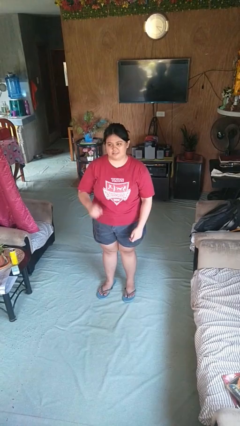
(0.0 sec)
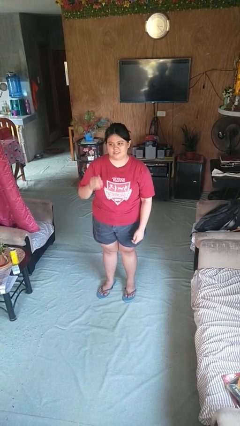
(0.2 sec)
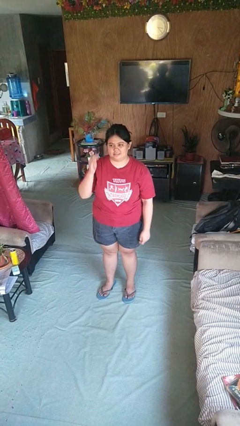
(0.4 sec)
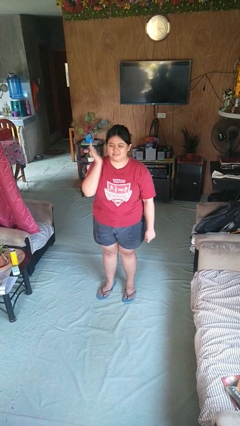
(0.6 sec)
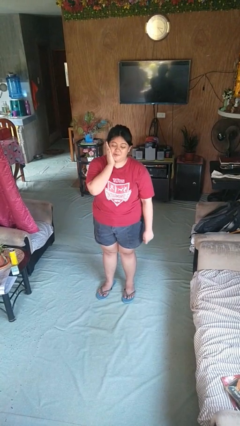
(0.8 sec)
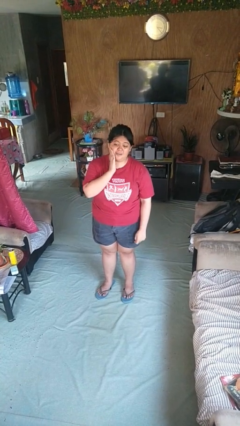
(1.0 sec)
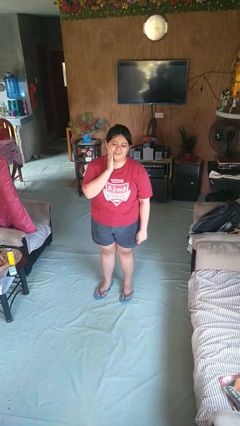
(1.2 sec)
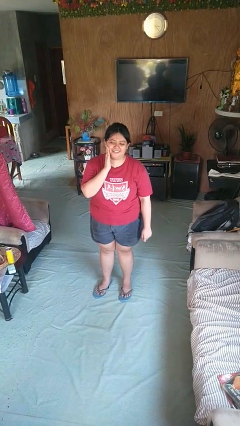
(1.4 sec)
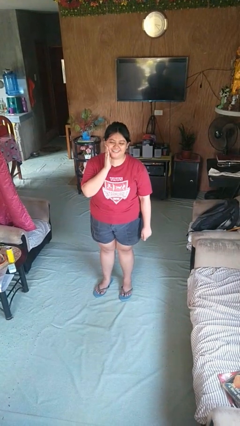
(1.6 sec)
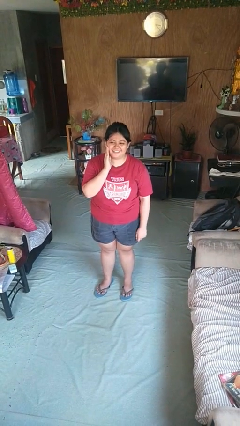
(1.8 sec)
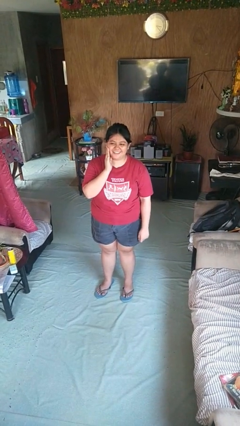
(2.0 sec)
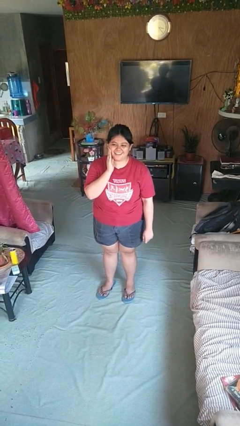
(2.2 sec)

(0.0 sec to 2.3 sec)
person swats bug

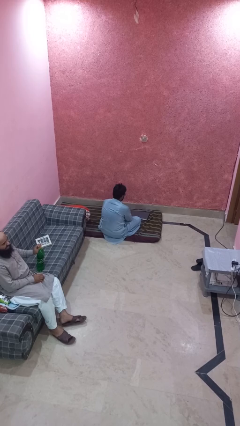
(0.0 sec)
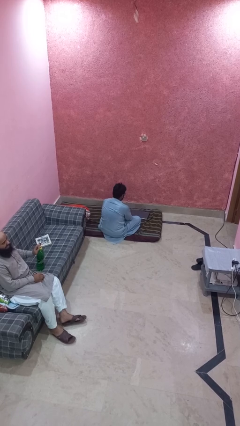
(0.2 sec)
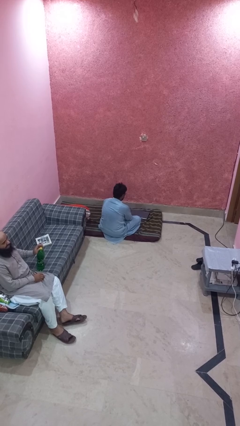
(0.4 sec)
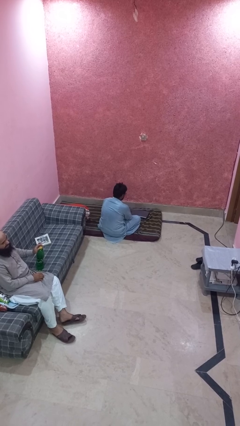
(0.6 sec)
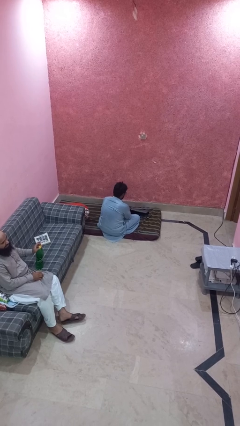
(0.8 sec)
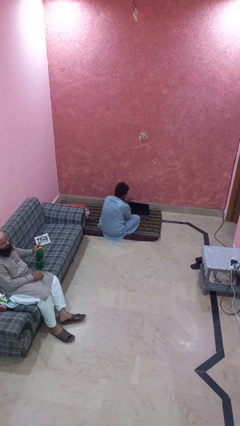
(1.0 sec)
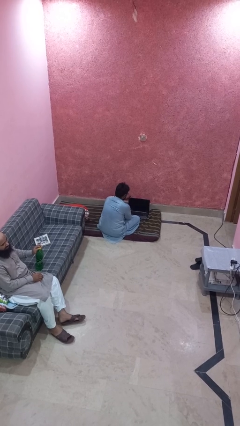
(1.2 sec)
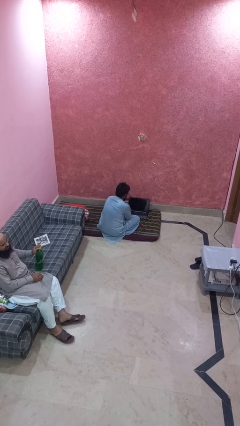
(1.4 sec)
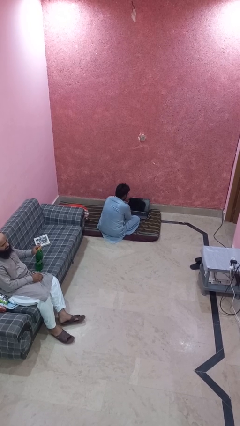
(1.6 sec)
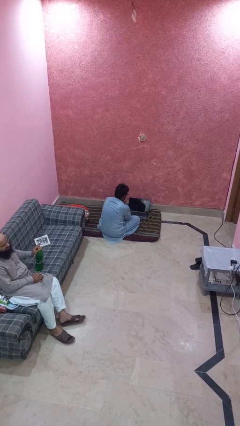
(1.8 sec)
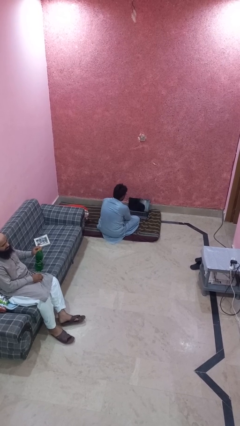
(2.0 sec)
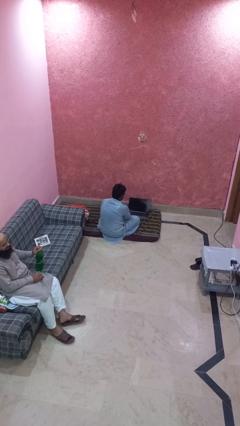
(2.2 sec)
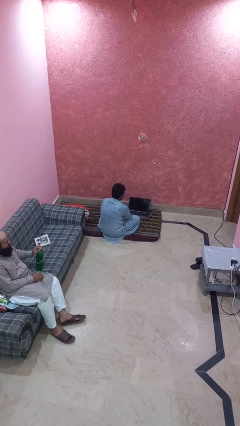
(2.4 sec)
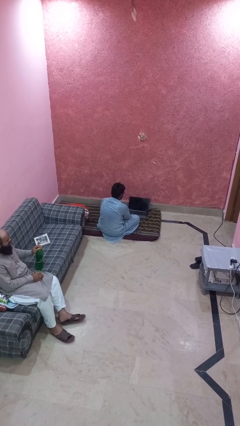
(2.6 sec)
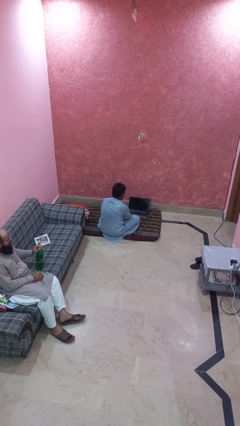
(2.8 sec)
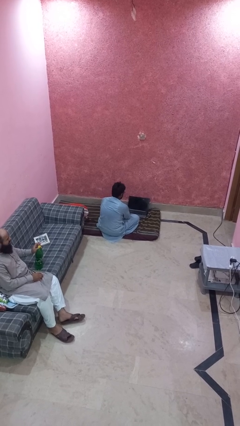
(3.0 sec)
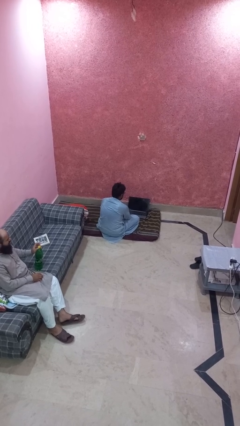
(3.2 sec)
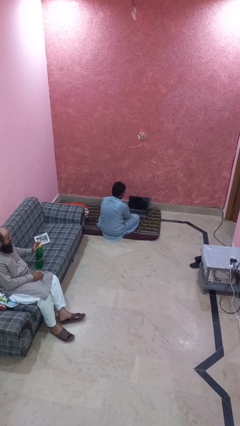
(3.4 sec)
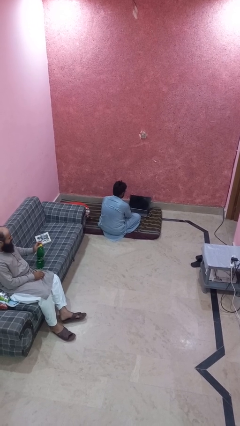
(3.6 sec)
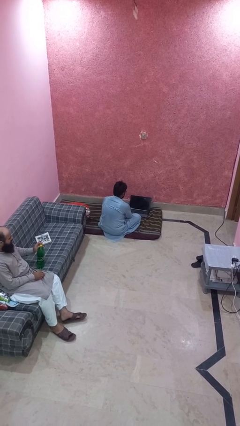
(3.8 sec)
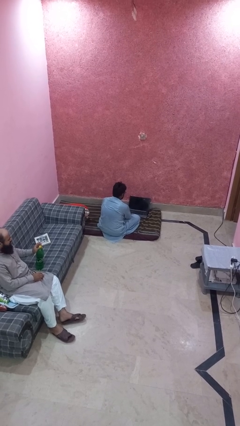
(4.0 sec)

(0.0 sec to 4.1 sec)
person opens laptop

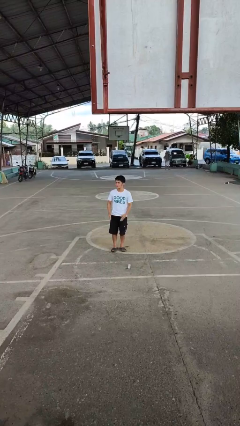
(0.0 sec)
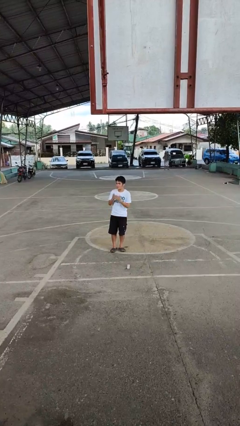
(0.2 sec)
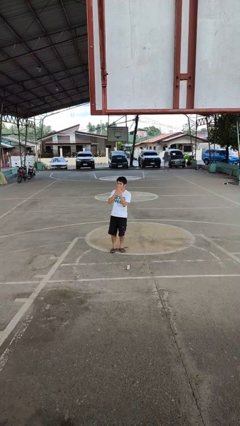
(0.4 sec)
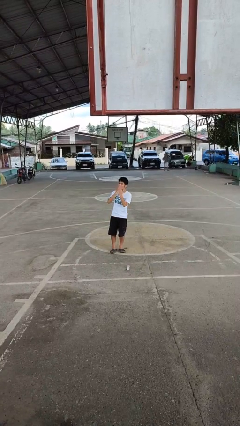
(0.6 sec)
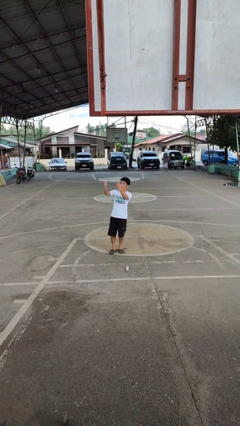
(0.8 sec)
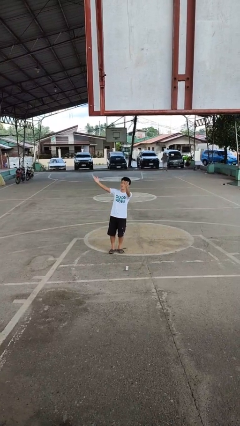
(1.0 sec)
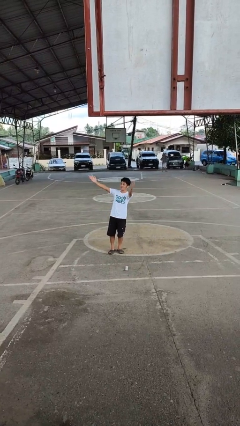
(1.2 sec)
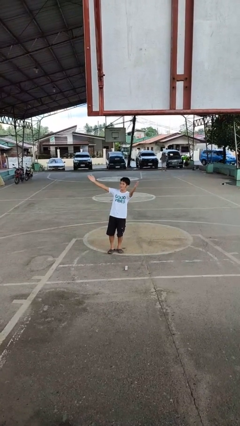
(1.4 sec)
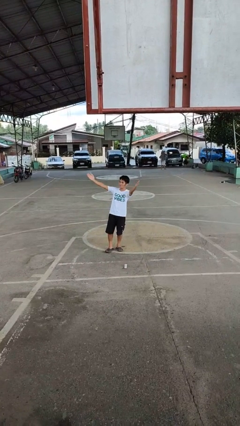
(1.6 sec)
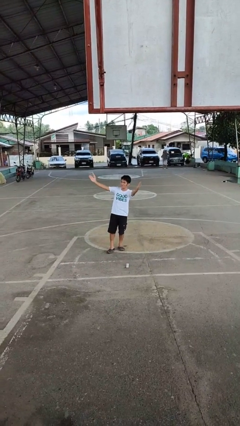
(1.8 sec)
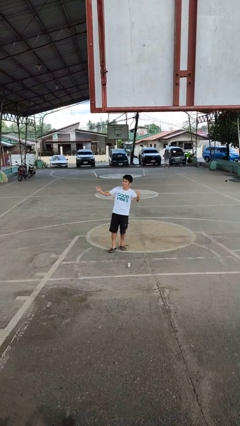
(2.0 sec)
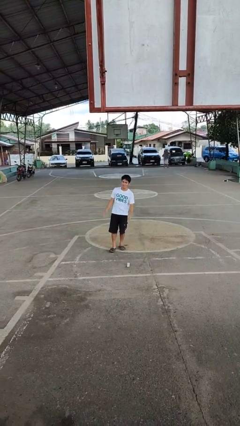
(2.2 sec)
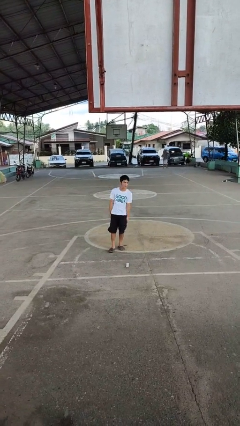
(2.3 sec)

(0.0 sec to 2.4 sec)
person gestures blow kiss

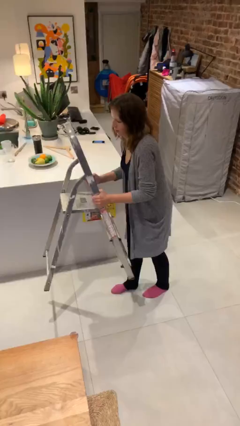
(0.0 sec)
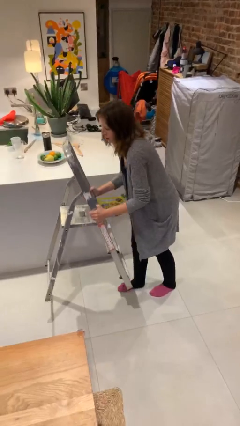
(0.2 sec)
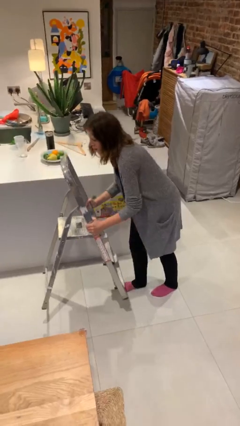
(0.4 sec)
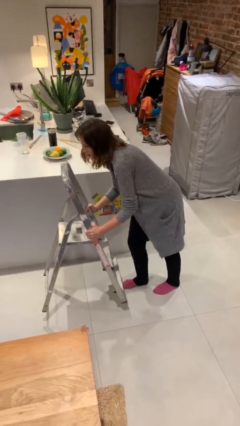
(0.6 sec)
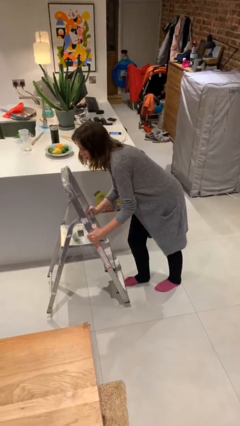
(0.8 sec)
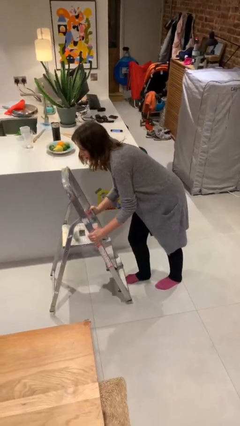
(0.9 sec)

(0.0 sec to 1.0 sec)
person puts down object on floor

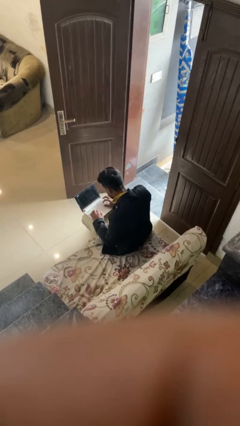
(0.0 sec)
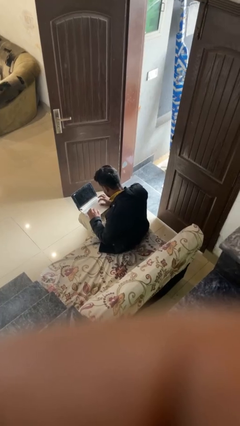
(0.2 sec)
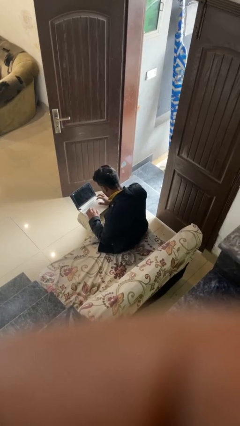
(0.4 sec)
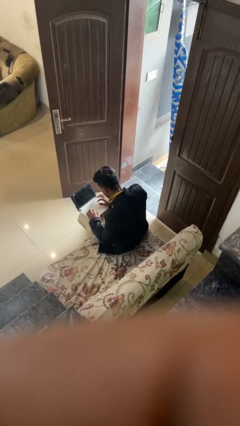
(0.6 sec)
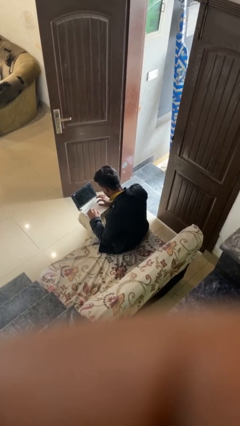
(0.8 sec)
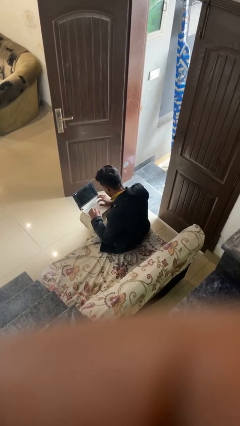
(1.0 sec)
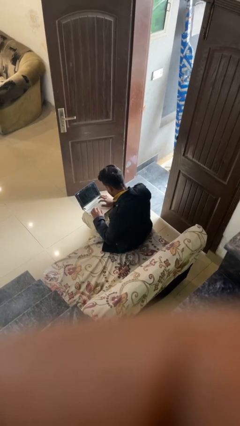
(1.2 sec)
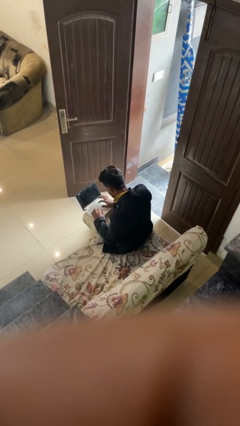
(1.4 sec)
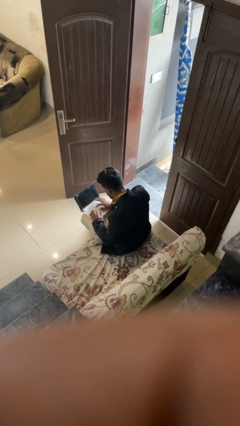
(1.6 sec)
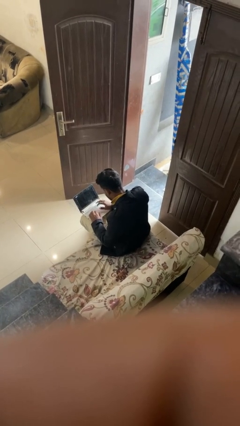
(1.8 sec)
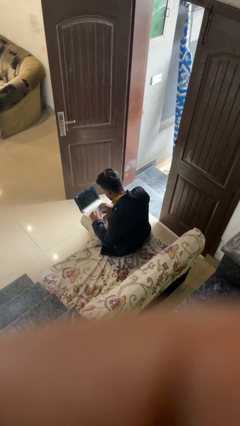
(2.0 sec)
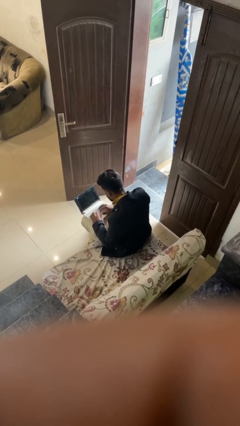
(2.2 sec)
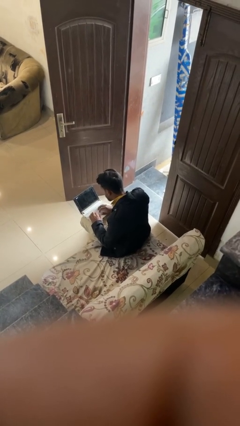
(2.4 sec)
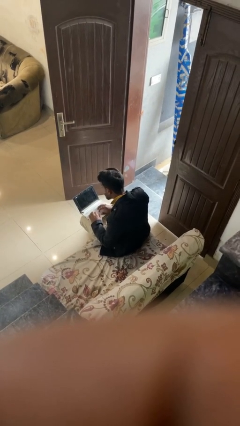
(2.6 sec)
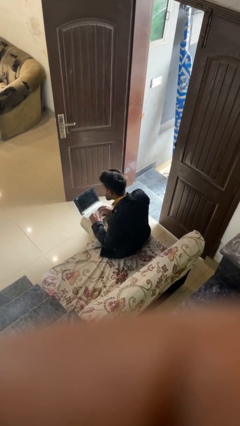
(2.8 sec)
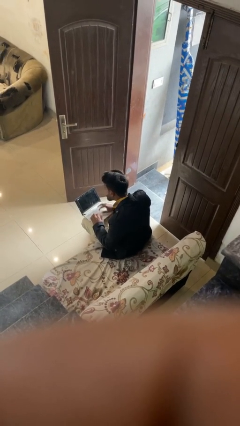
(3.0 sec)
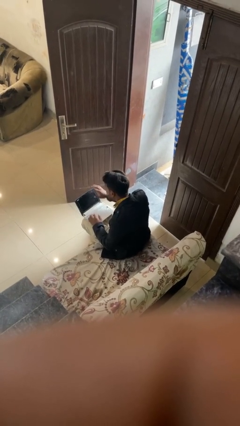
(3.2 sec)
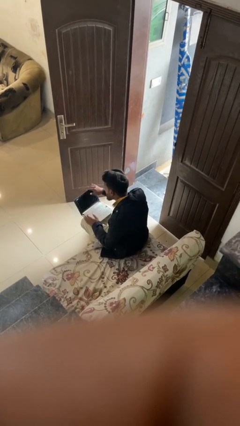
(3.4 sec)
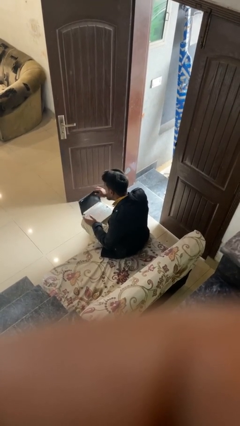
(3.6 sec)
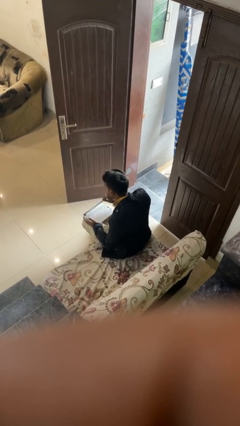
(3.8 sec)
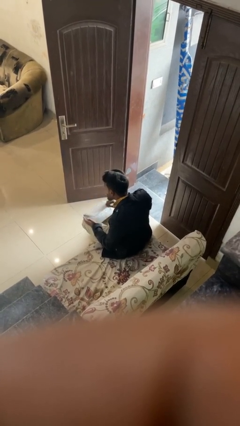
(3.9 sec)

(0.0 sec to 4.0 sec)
person interacts with laptop

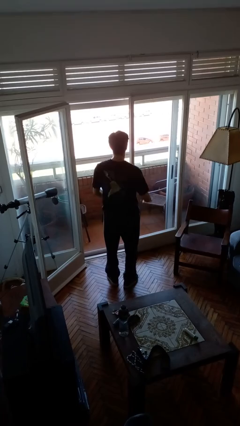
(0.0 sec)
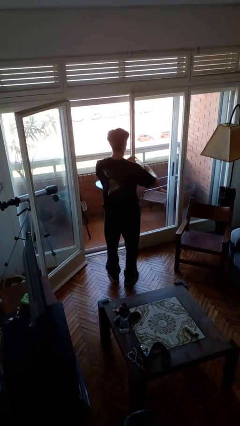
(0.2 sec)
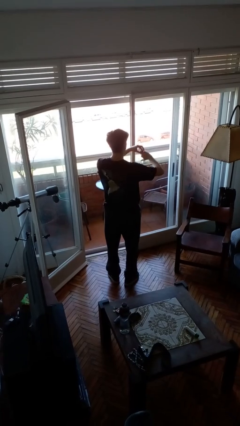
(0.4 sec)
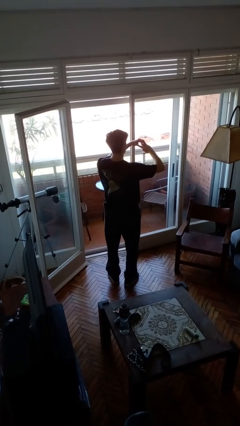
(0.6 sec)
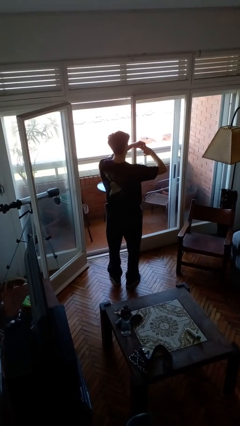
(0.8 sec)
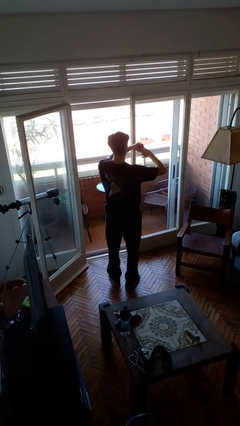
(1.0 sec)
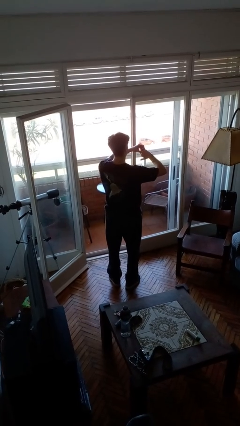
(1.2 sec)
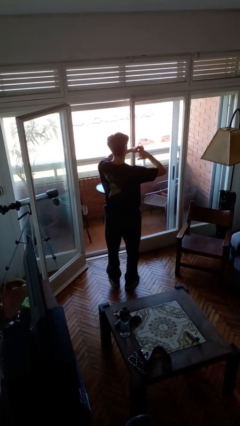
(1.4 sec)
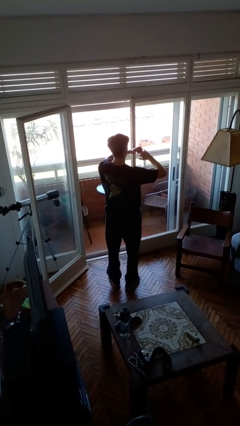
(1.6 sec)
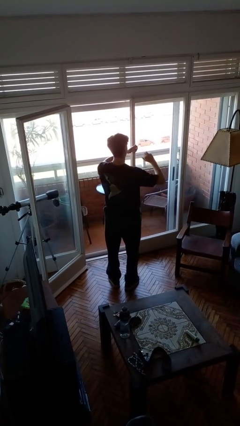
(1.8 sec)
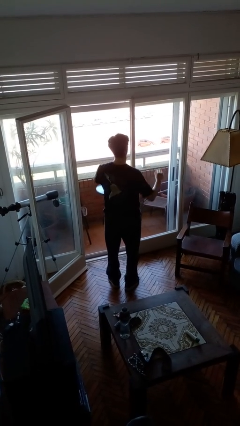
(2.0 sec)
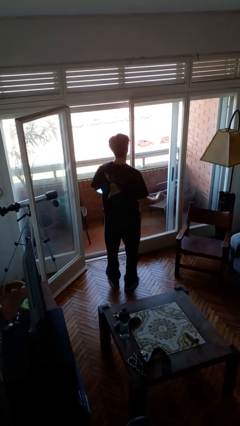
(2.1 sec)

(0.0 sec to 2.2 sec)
person takes off ring

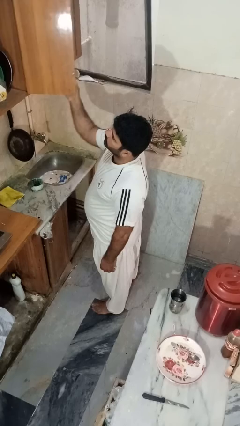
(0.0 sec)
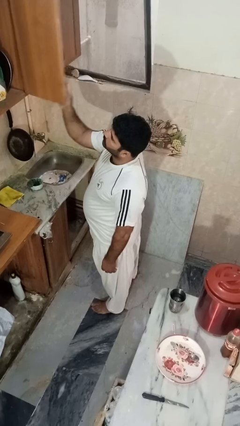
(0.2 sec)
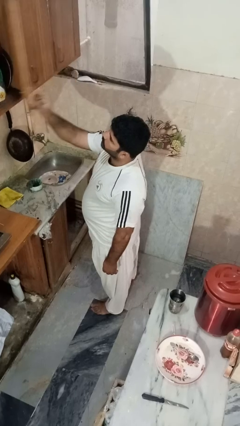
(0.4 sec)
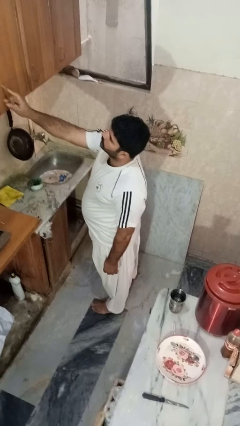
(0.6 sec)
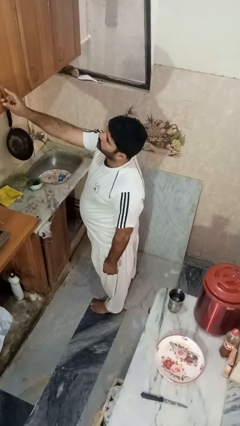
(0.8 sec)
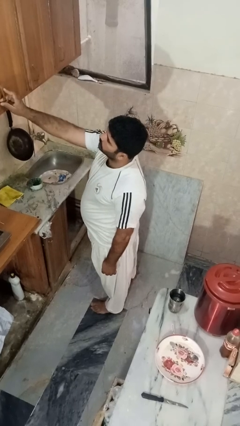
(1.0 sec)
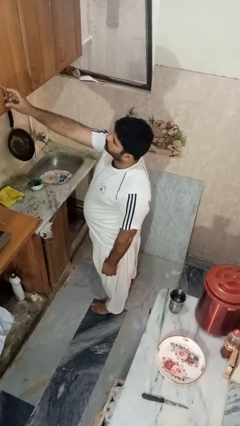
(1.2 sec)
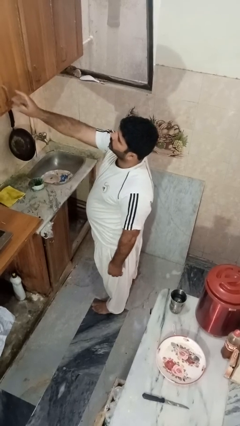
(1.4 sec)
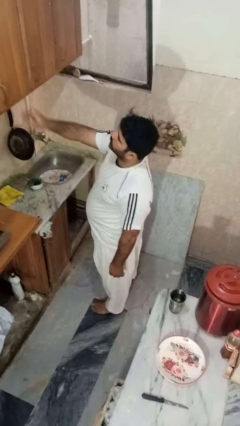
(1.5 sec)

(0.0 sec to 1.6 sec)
person closes cabinet
